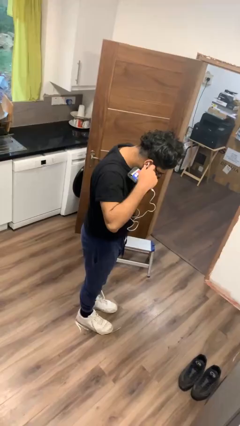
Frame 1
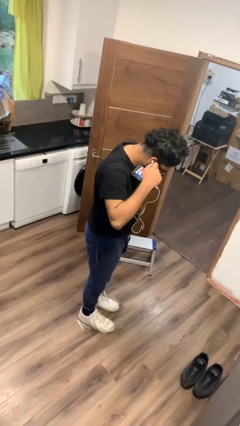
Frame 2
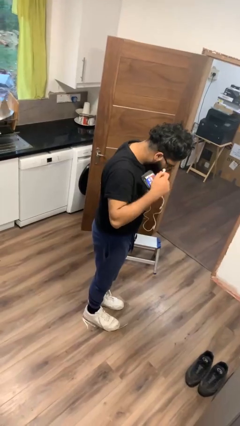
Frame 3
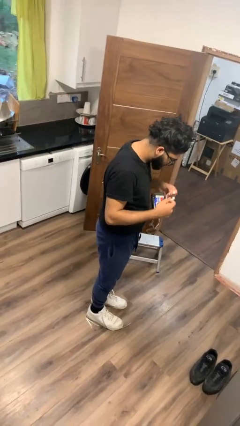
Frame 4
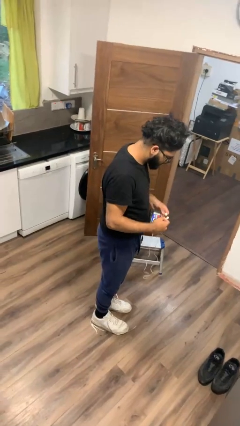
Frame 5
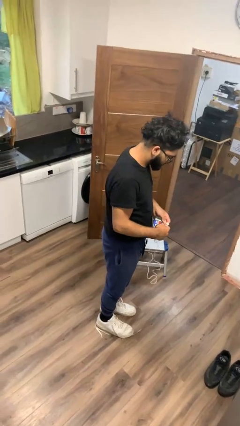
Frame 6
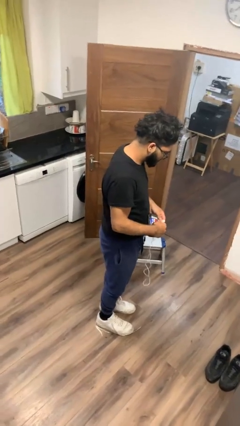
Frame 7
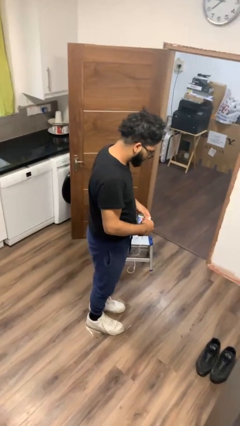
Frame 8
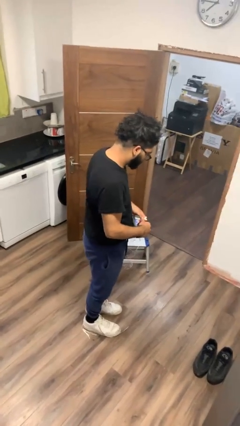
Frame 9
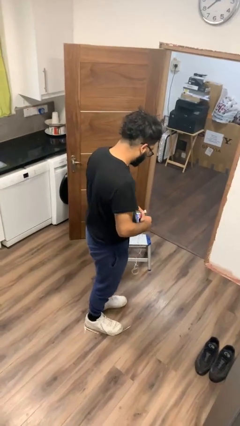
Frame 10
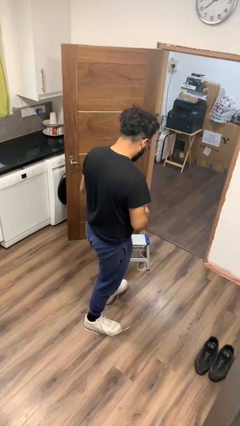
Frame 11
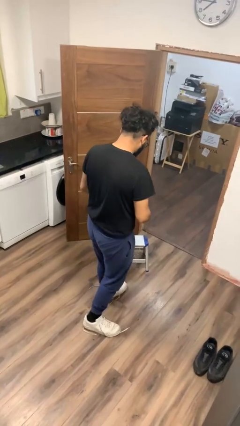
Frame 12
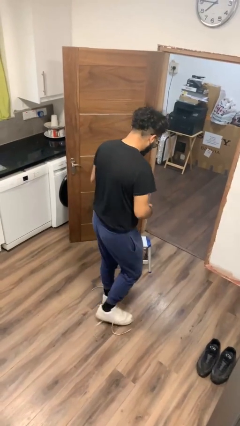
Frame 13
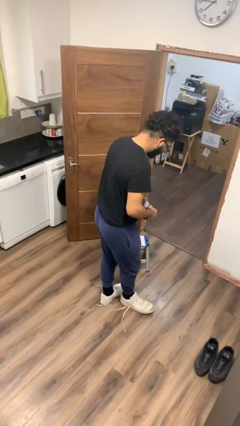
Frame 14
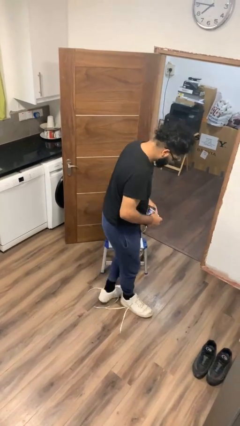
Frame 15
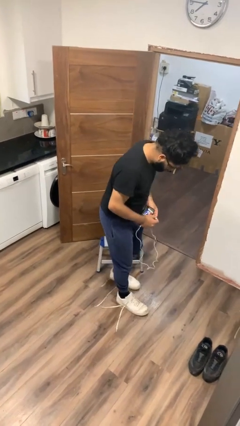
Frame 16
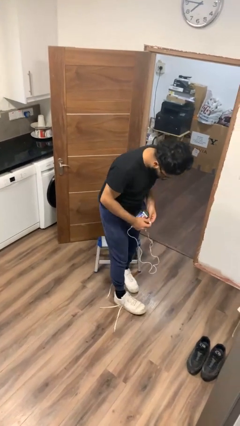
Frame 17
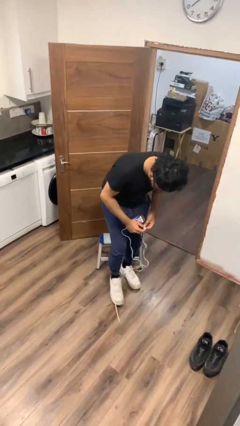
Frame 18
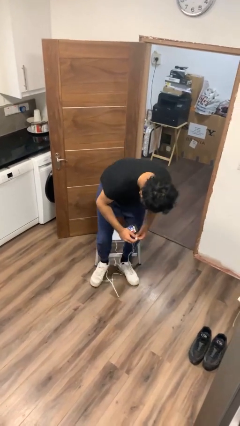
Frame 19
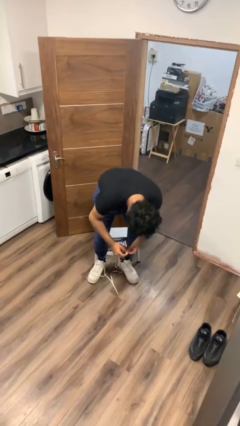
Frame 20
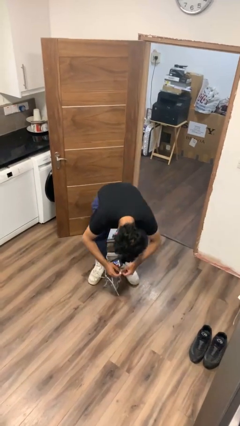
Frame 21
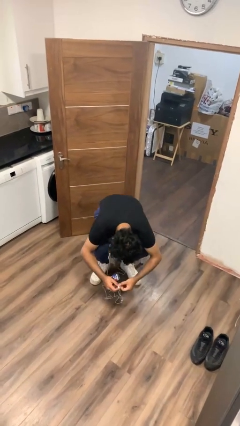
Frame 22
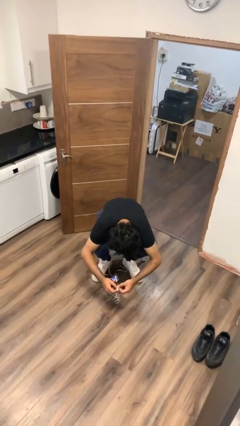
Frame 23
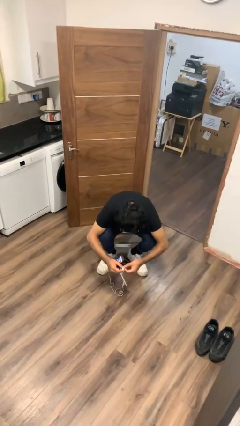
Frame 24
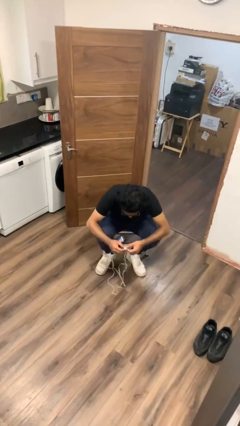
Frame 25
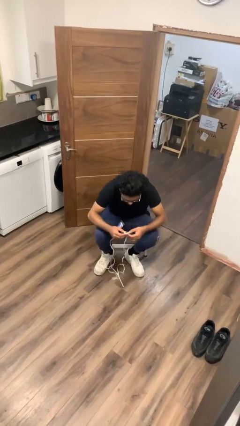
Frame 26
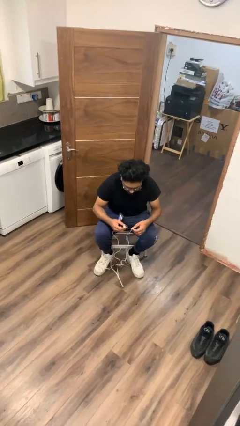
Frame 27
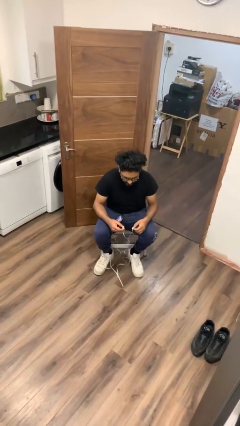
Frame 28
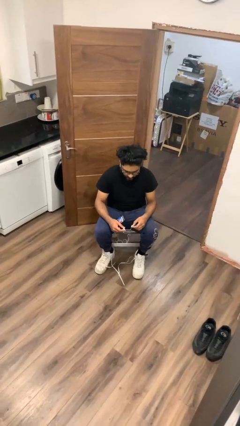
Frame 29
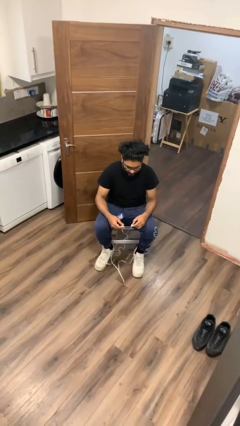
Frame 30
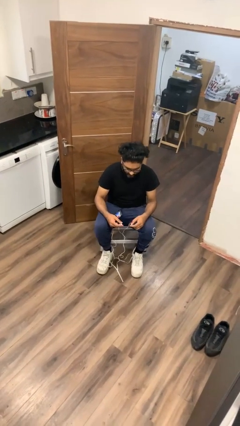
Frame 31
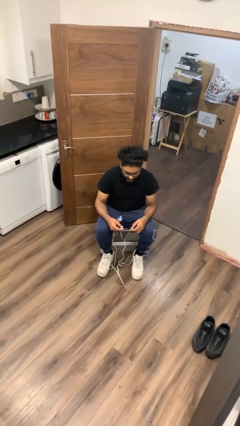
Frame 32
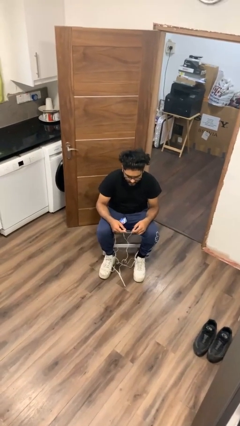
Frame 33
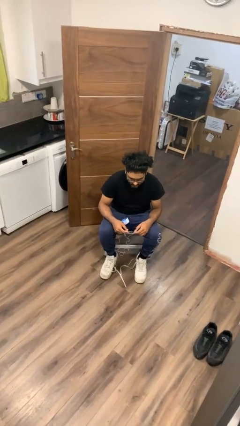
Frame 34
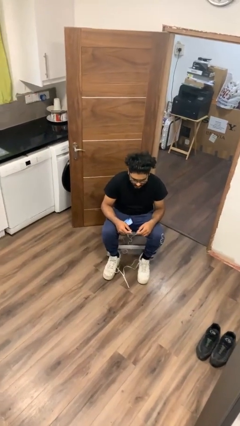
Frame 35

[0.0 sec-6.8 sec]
person takes off headphones

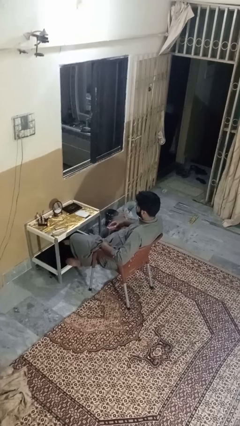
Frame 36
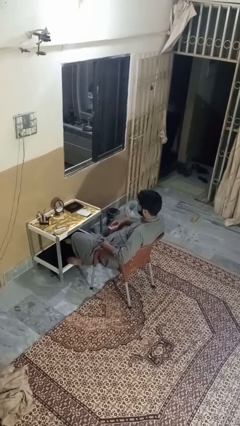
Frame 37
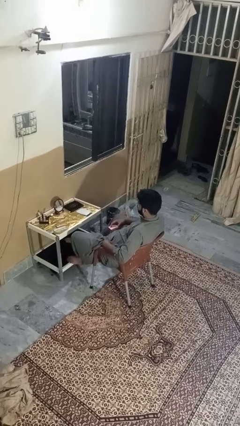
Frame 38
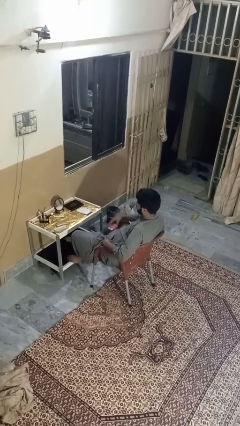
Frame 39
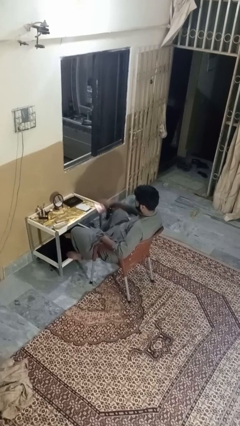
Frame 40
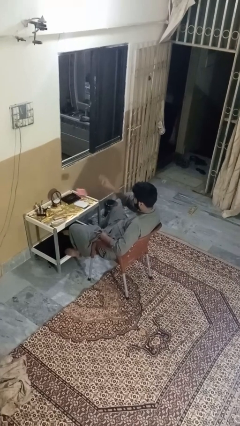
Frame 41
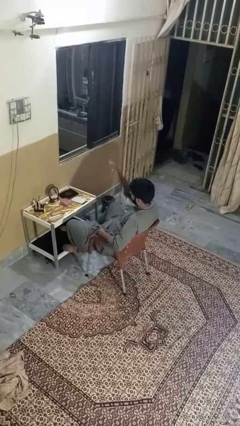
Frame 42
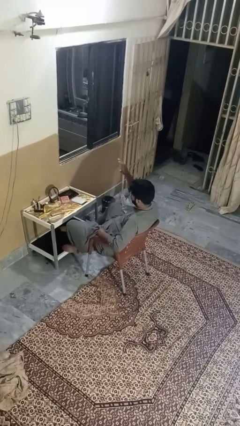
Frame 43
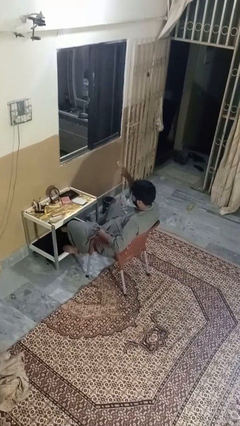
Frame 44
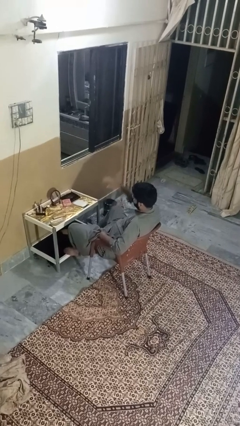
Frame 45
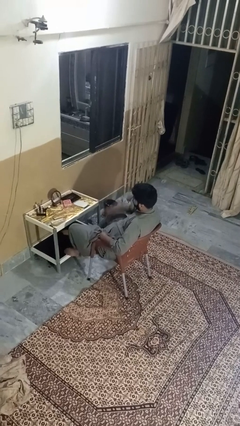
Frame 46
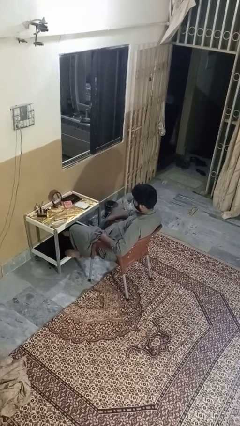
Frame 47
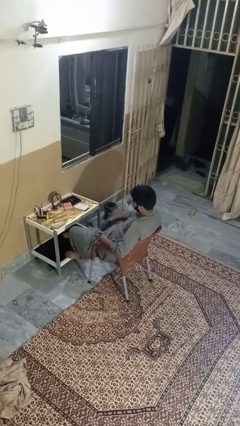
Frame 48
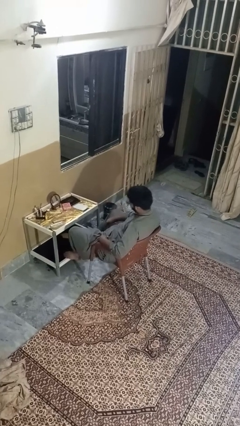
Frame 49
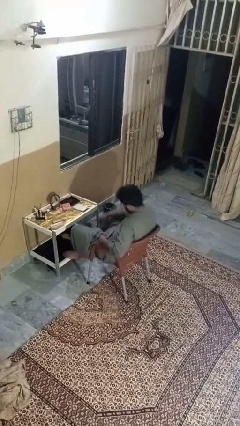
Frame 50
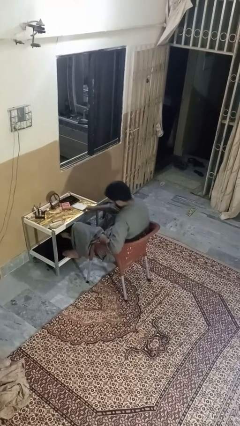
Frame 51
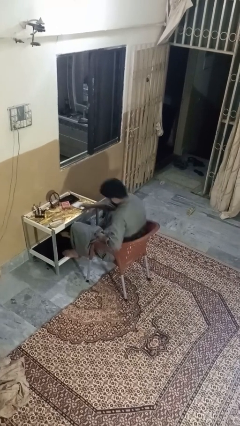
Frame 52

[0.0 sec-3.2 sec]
person throws object on table

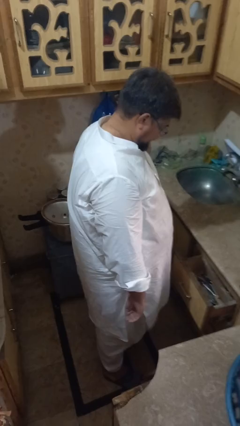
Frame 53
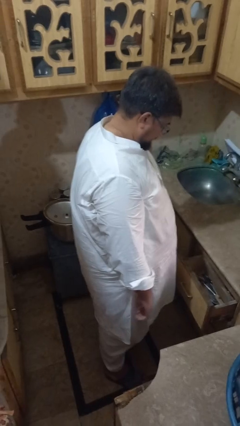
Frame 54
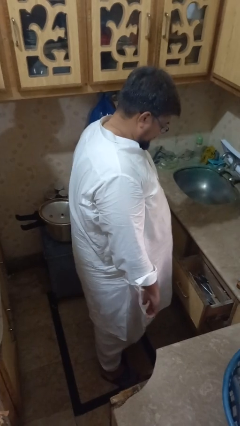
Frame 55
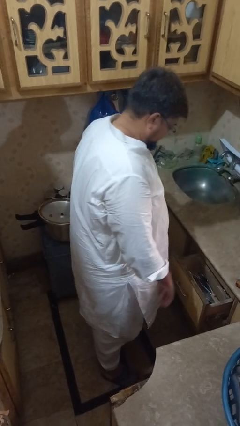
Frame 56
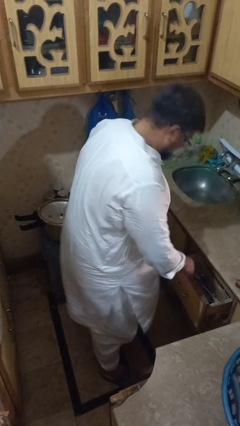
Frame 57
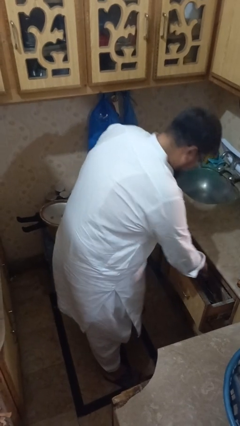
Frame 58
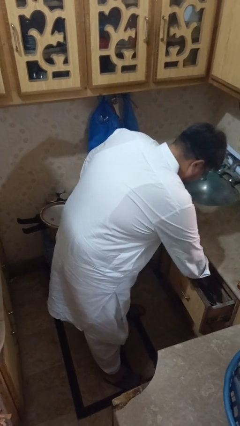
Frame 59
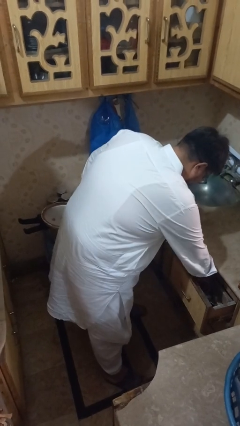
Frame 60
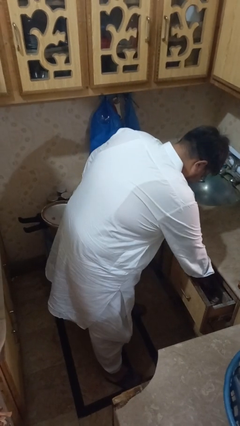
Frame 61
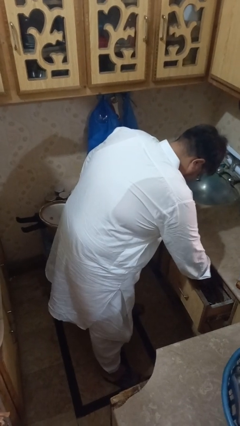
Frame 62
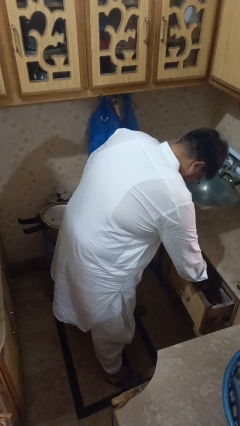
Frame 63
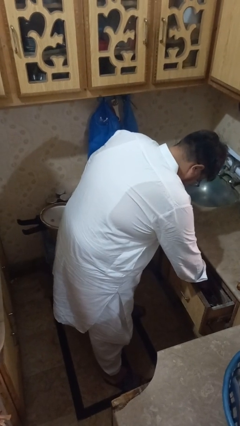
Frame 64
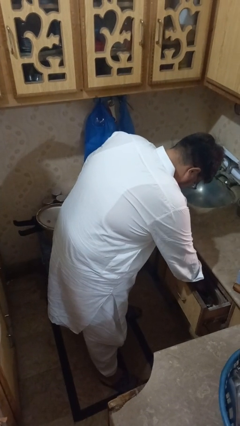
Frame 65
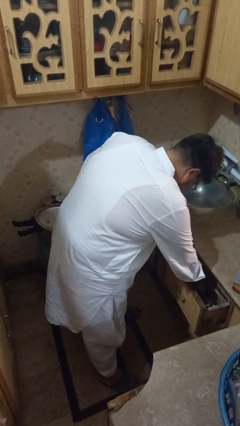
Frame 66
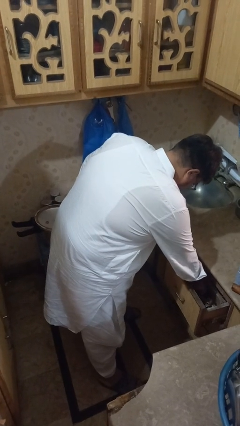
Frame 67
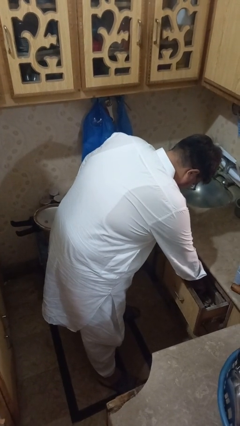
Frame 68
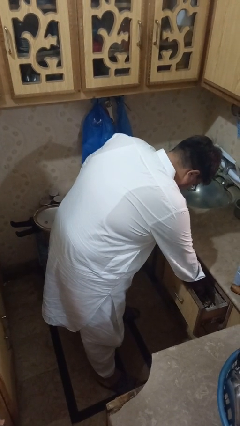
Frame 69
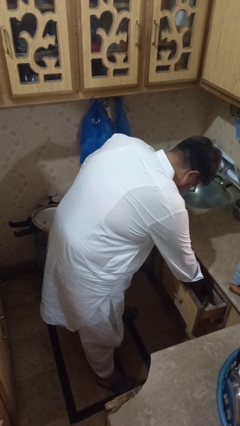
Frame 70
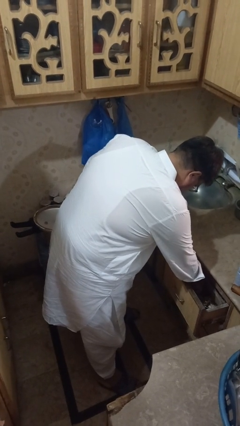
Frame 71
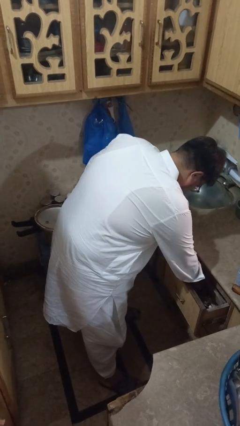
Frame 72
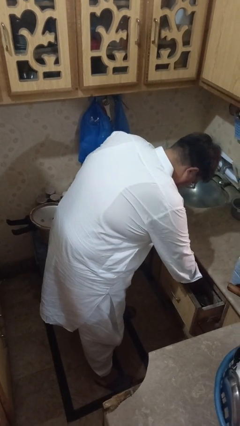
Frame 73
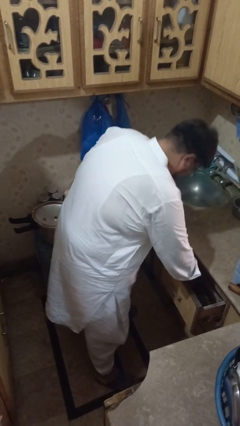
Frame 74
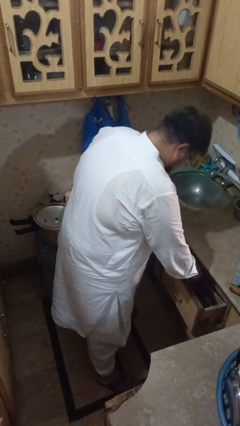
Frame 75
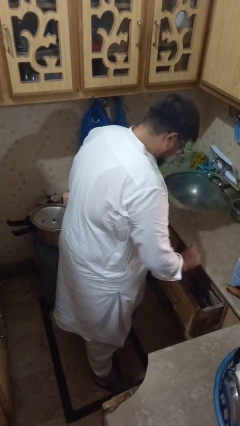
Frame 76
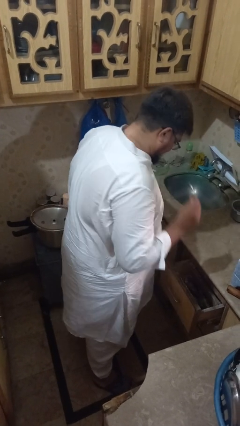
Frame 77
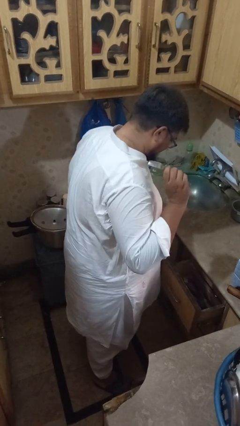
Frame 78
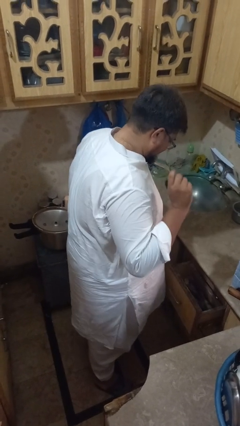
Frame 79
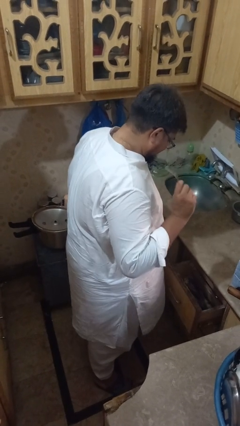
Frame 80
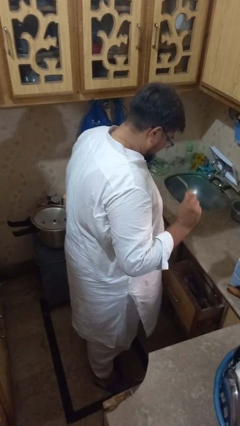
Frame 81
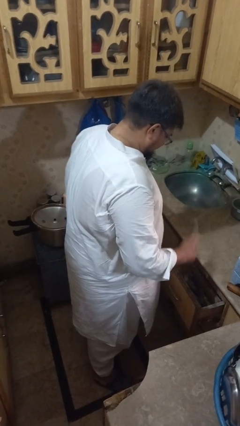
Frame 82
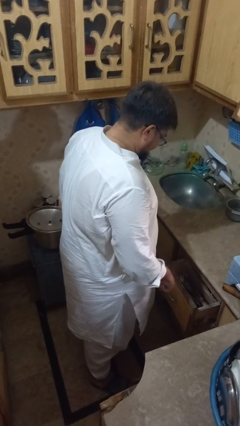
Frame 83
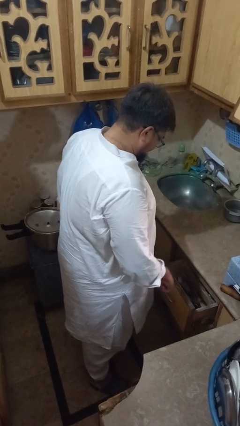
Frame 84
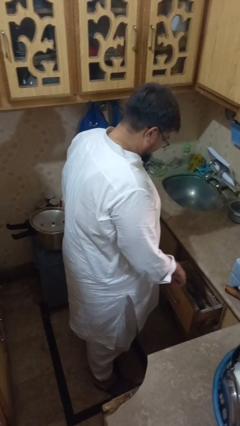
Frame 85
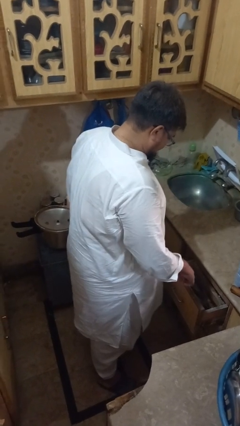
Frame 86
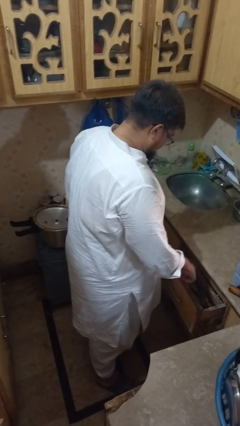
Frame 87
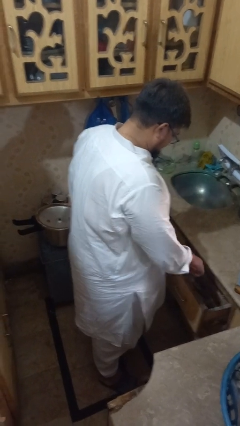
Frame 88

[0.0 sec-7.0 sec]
person searches in kitchen drawer

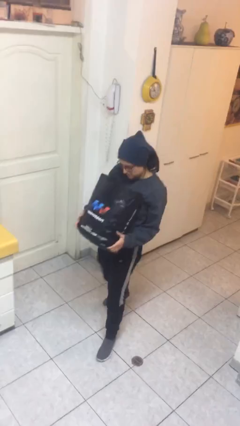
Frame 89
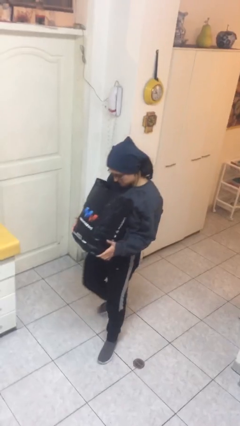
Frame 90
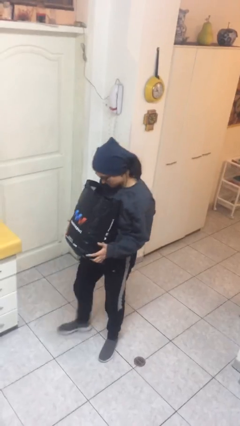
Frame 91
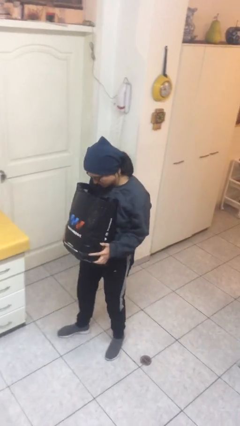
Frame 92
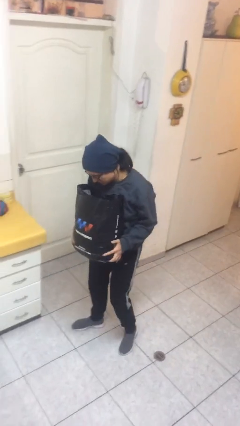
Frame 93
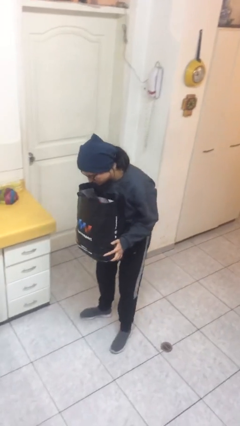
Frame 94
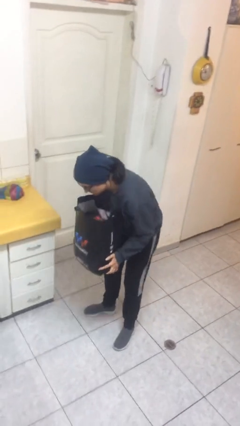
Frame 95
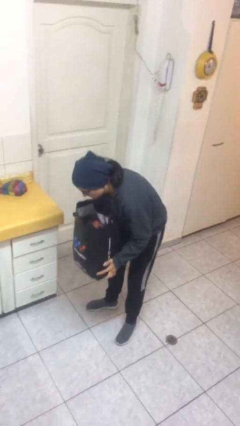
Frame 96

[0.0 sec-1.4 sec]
person carries heavy object
